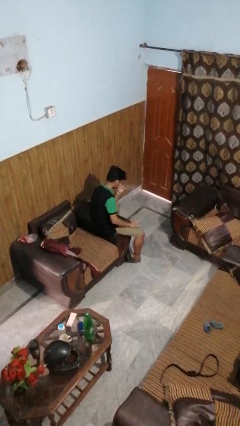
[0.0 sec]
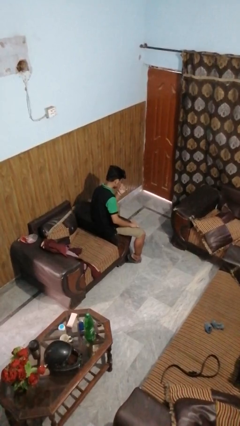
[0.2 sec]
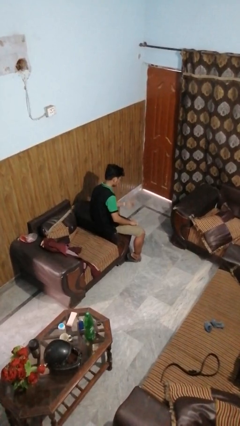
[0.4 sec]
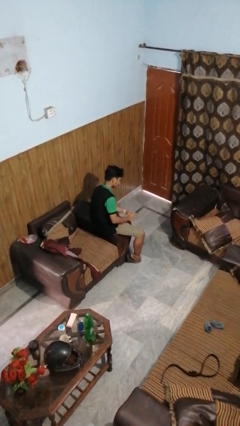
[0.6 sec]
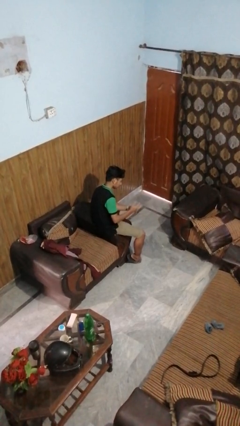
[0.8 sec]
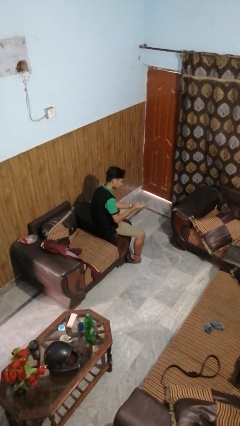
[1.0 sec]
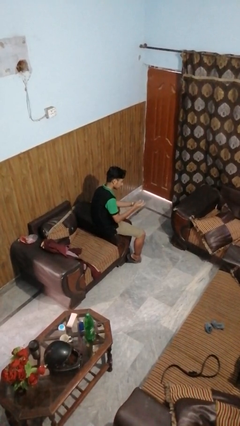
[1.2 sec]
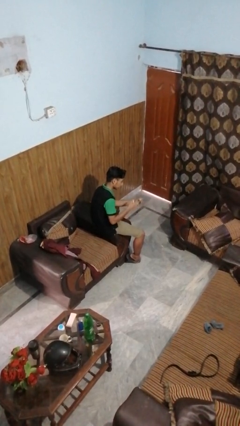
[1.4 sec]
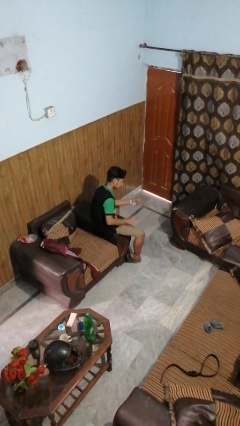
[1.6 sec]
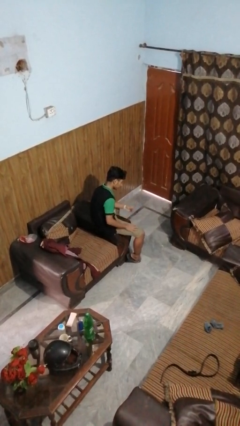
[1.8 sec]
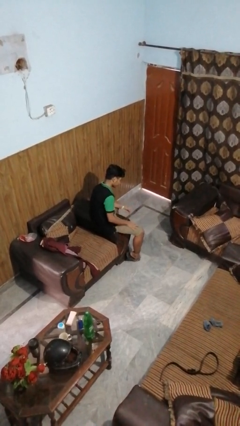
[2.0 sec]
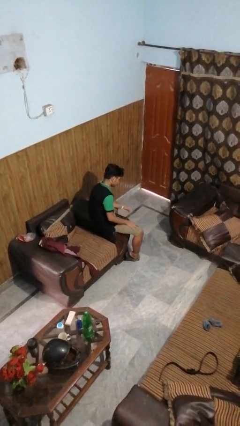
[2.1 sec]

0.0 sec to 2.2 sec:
person takes off ring

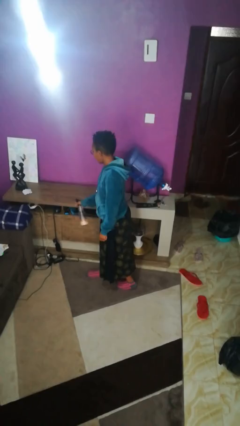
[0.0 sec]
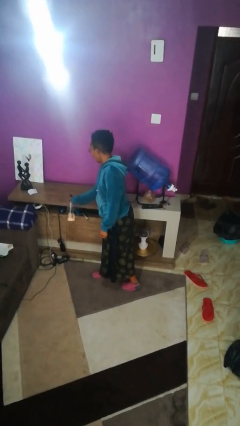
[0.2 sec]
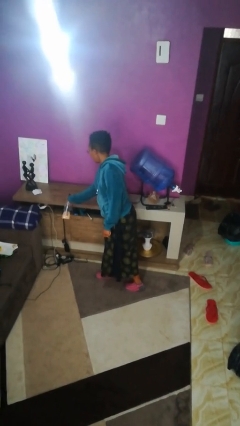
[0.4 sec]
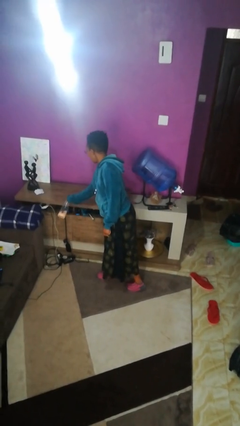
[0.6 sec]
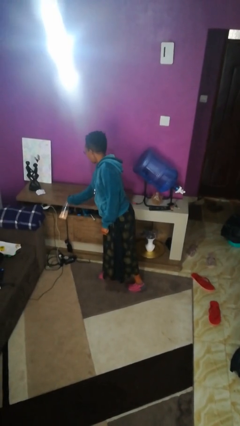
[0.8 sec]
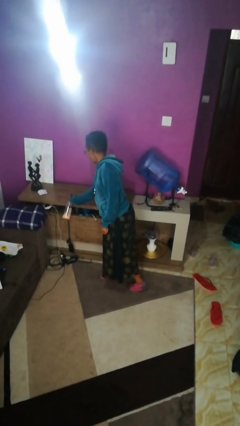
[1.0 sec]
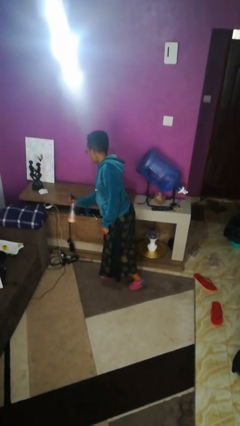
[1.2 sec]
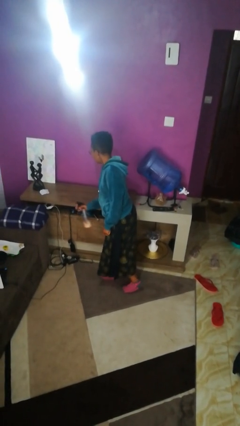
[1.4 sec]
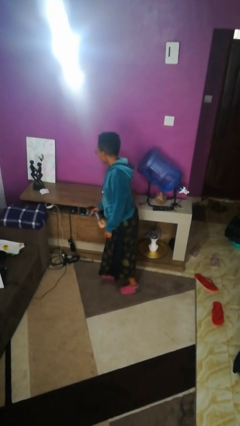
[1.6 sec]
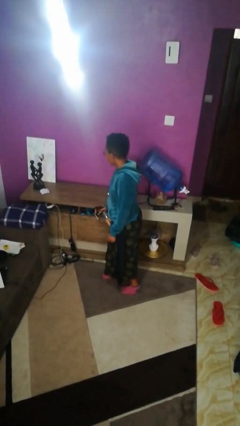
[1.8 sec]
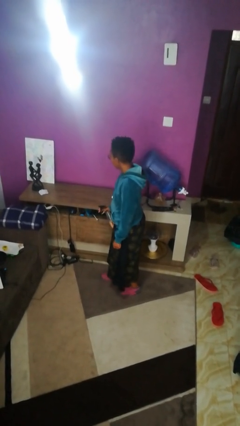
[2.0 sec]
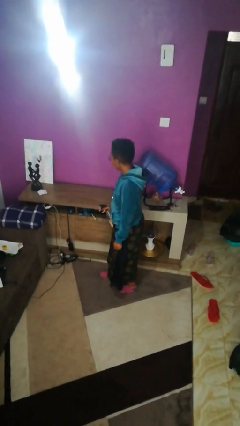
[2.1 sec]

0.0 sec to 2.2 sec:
person sprays from bottle

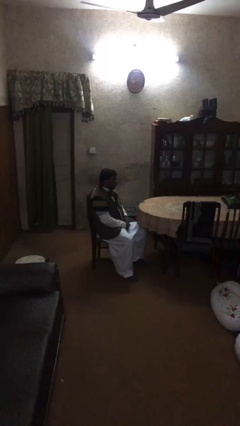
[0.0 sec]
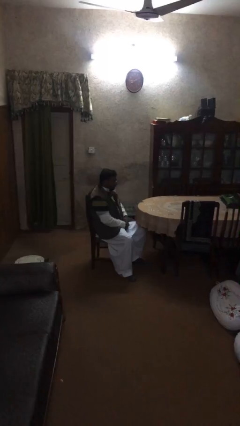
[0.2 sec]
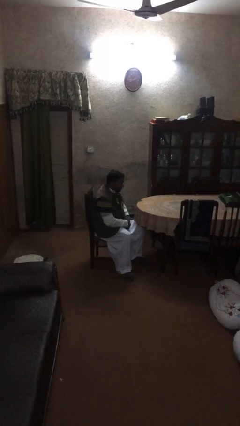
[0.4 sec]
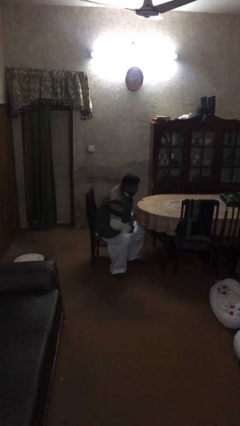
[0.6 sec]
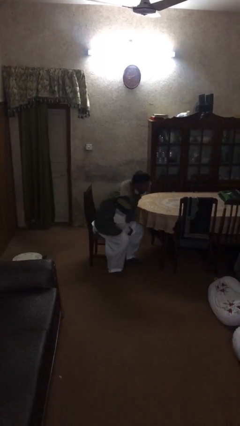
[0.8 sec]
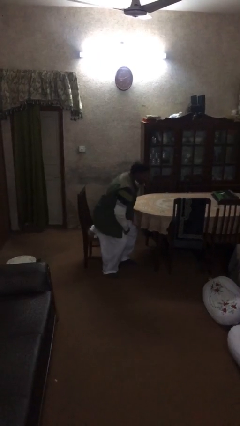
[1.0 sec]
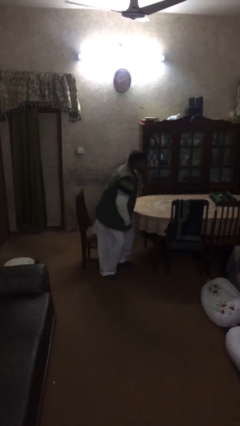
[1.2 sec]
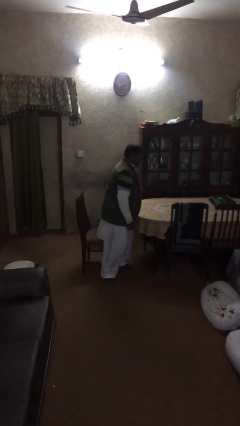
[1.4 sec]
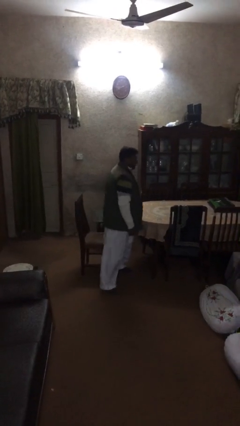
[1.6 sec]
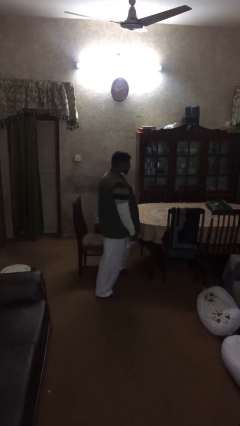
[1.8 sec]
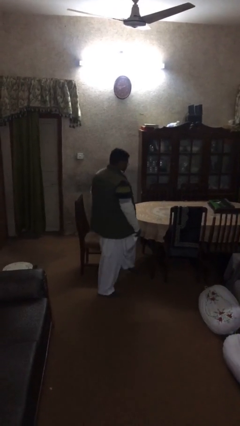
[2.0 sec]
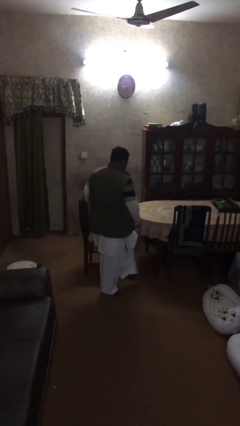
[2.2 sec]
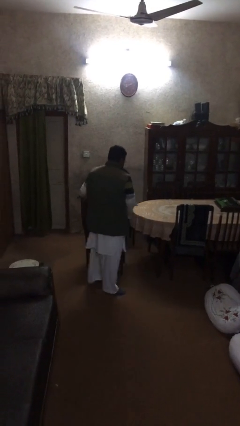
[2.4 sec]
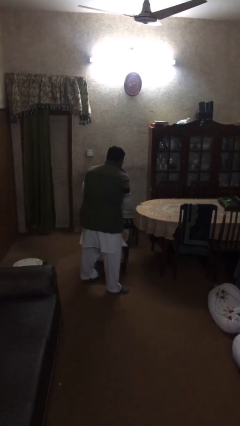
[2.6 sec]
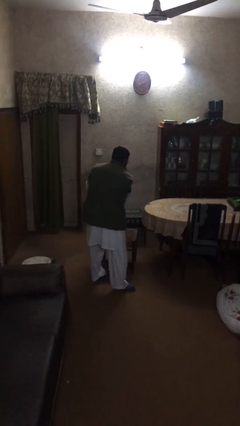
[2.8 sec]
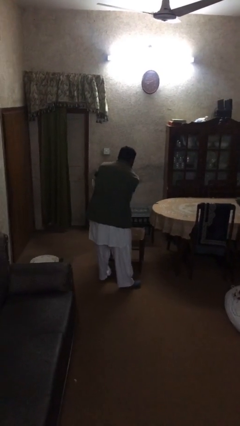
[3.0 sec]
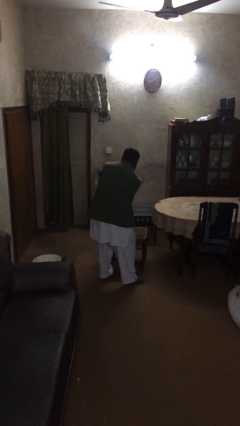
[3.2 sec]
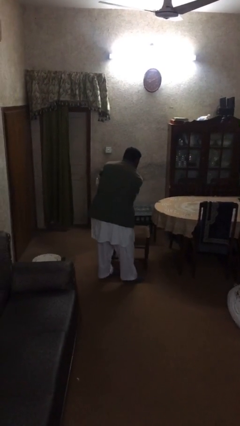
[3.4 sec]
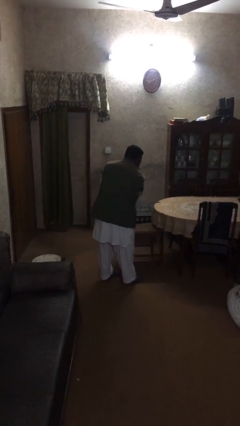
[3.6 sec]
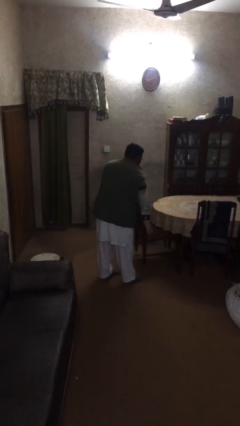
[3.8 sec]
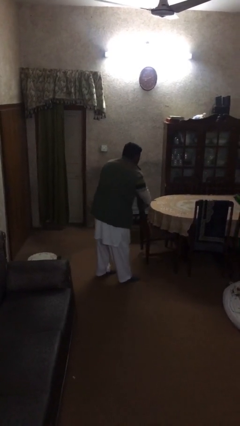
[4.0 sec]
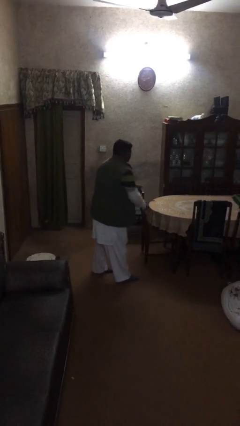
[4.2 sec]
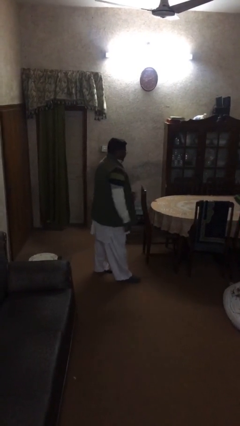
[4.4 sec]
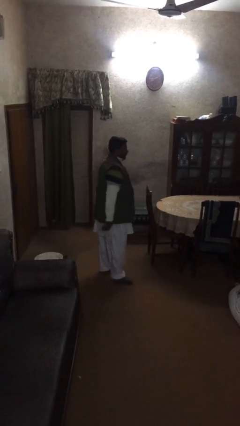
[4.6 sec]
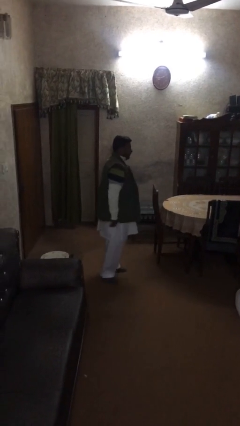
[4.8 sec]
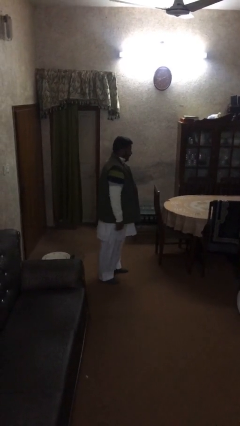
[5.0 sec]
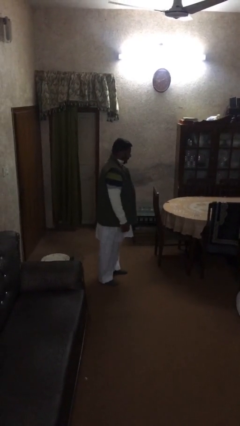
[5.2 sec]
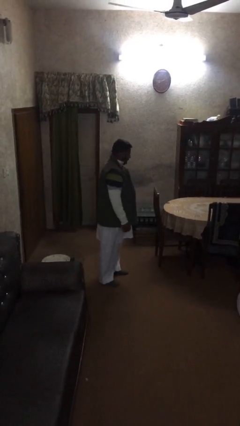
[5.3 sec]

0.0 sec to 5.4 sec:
person stands up

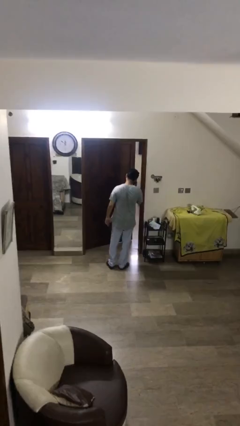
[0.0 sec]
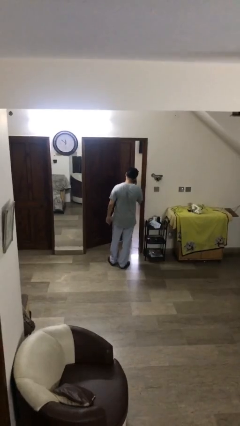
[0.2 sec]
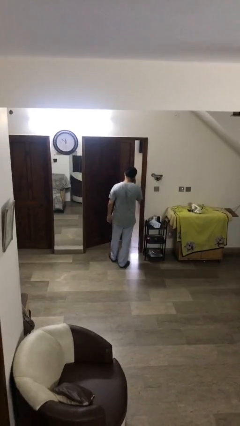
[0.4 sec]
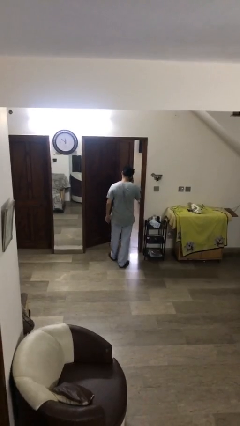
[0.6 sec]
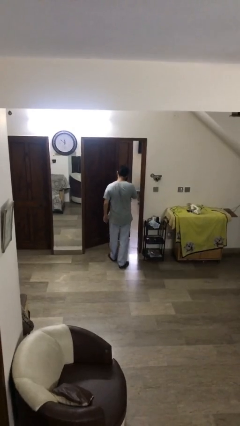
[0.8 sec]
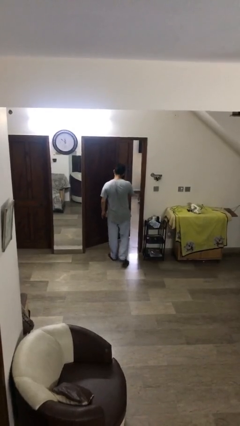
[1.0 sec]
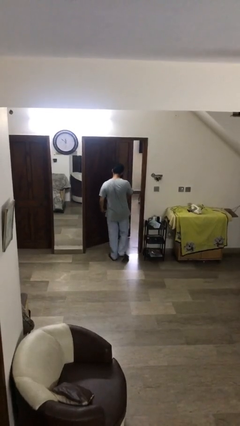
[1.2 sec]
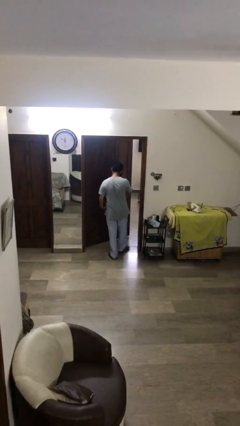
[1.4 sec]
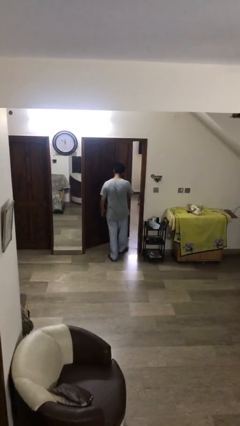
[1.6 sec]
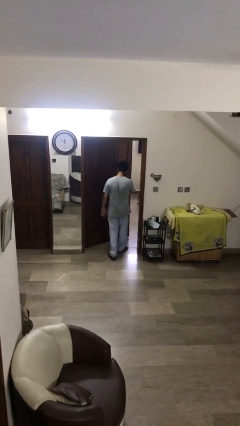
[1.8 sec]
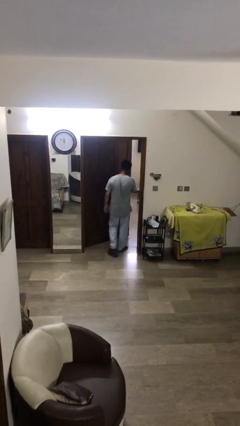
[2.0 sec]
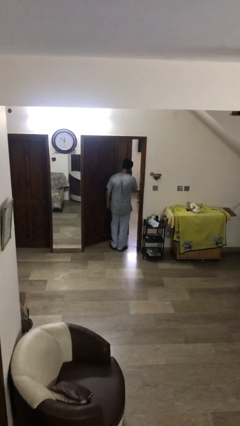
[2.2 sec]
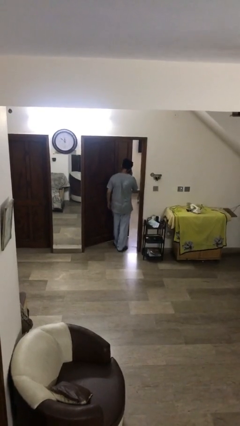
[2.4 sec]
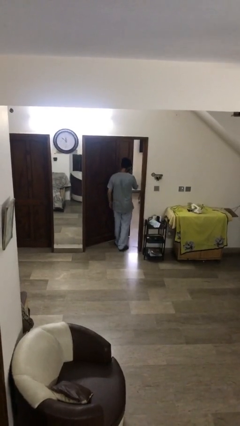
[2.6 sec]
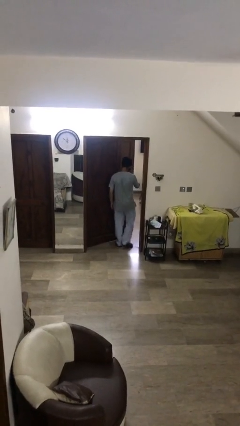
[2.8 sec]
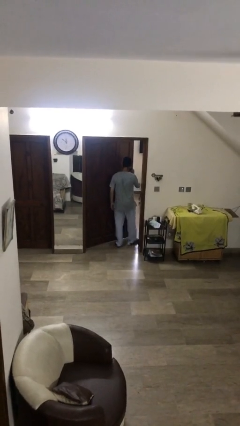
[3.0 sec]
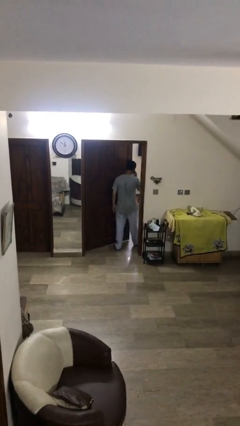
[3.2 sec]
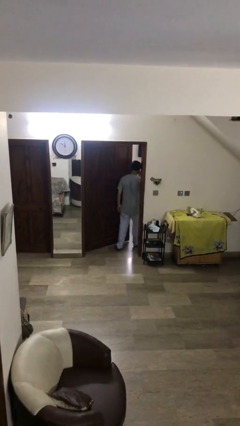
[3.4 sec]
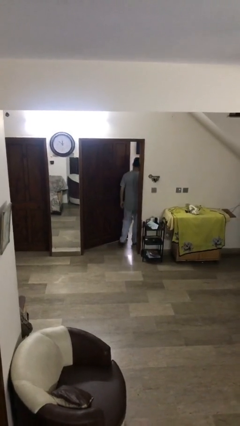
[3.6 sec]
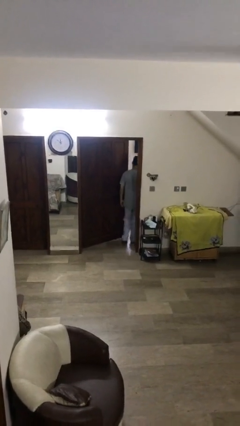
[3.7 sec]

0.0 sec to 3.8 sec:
person exits scene through structure

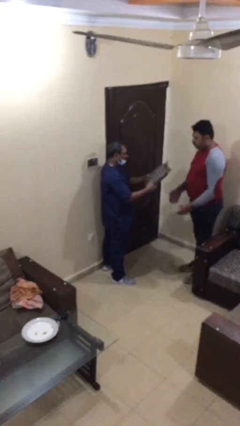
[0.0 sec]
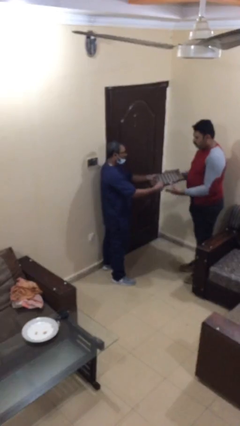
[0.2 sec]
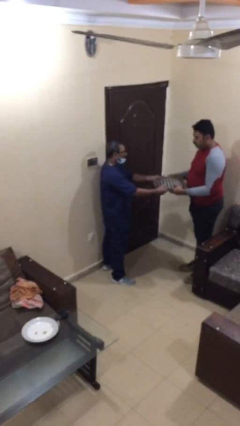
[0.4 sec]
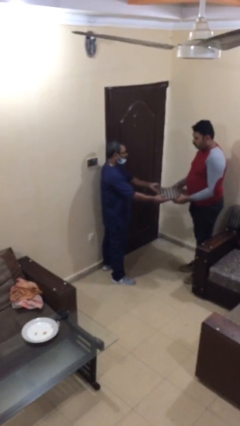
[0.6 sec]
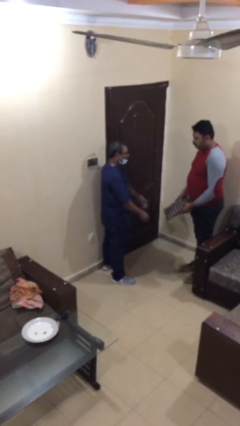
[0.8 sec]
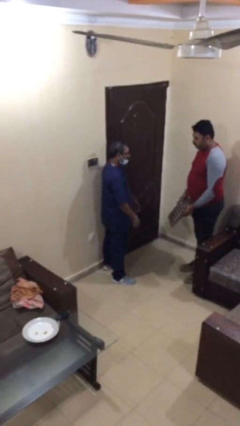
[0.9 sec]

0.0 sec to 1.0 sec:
person transfers object to person

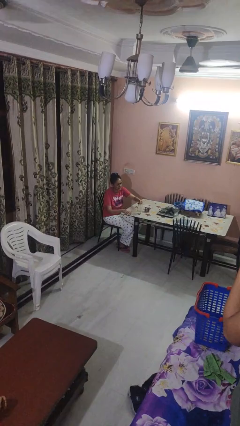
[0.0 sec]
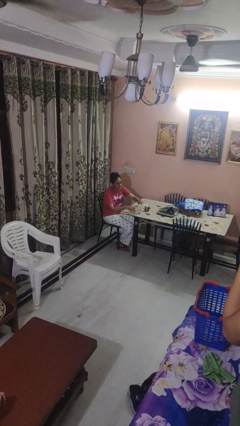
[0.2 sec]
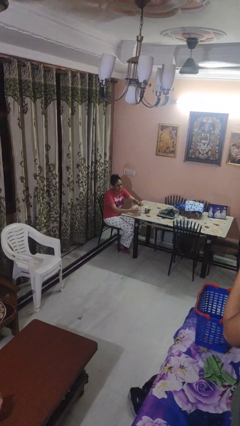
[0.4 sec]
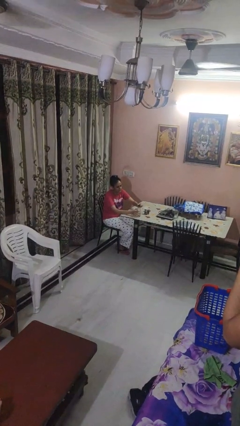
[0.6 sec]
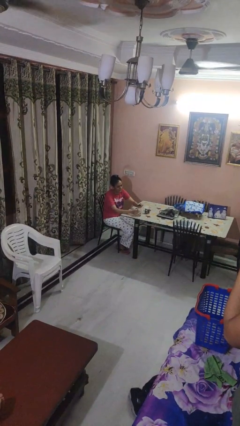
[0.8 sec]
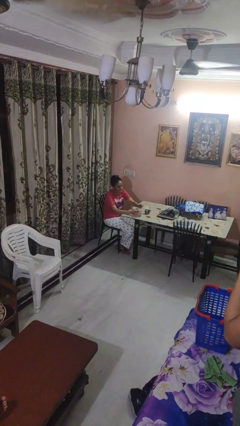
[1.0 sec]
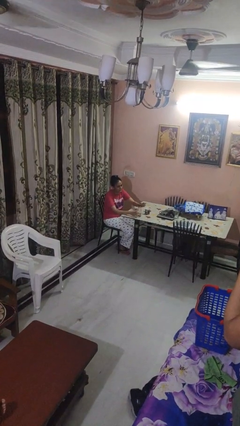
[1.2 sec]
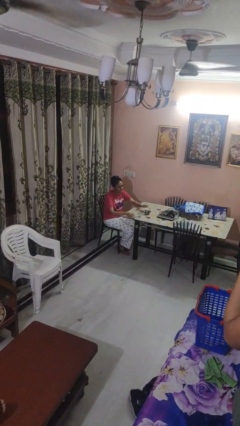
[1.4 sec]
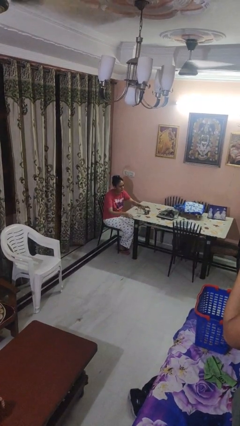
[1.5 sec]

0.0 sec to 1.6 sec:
person screws lid to bottle

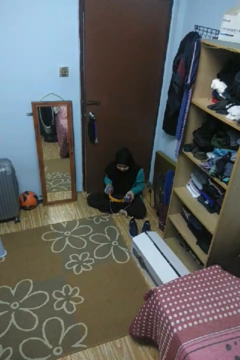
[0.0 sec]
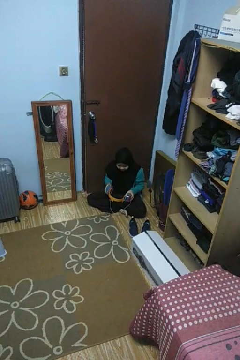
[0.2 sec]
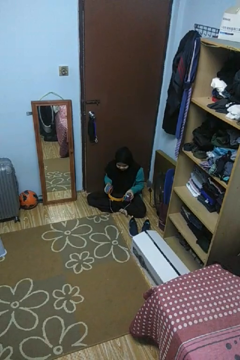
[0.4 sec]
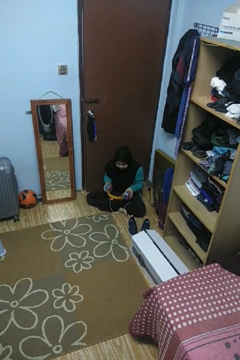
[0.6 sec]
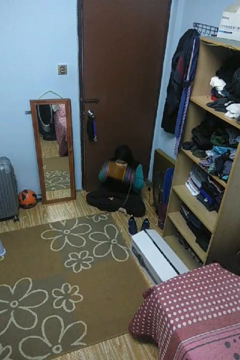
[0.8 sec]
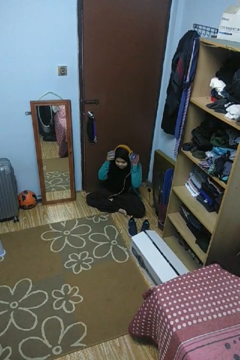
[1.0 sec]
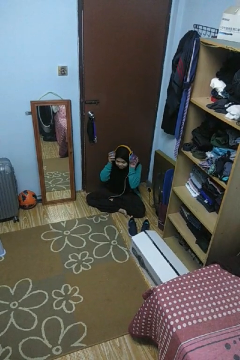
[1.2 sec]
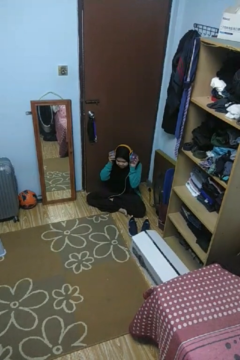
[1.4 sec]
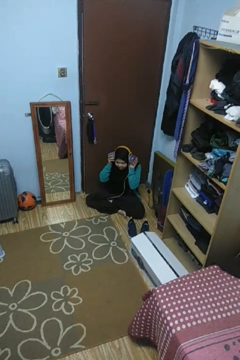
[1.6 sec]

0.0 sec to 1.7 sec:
person puts on headphones
